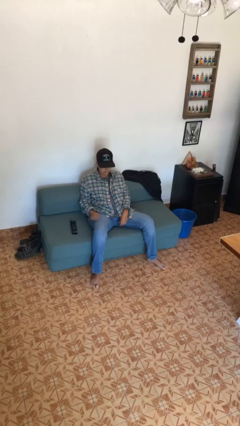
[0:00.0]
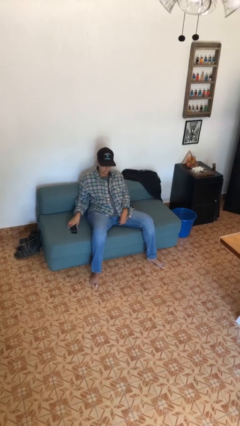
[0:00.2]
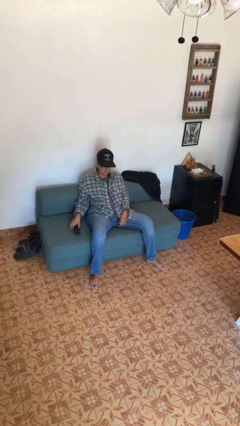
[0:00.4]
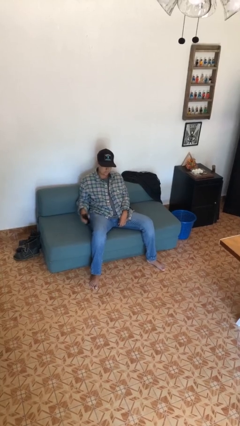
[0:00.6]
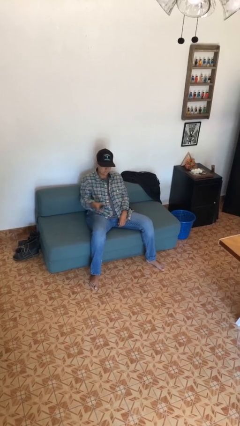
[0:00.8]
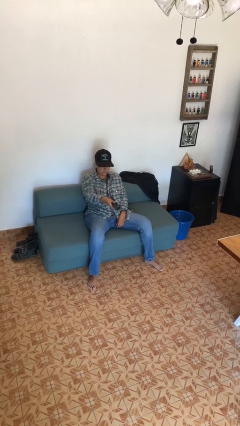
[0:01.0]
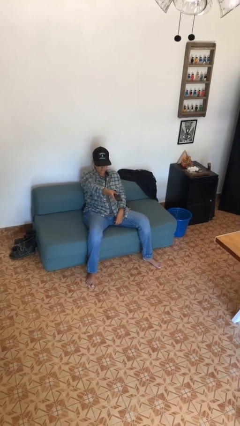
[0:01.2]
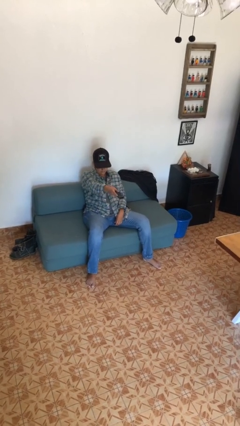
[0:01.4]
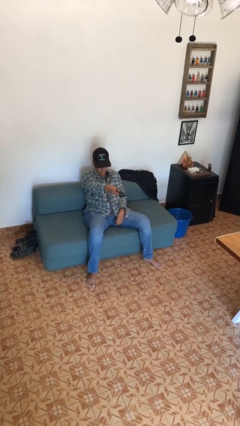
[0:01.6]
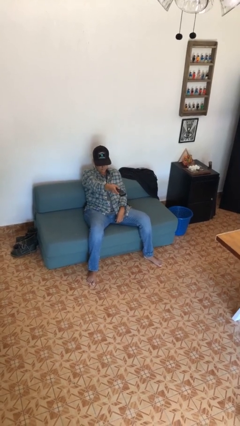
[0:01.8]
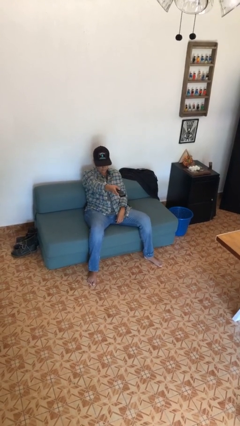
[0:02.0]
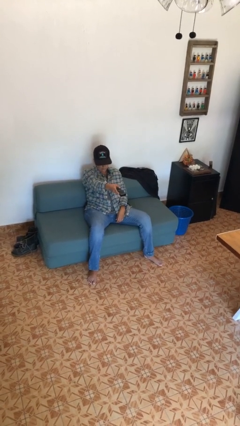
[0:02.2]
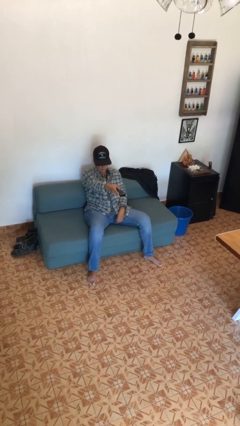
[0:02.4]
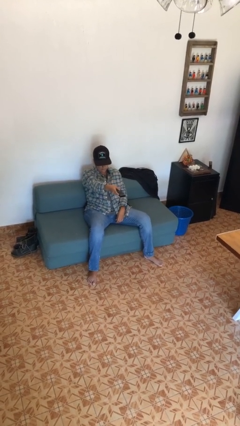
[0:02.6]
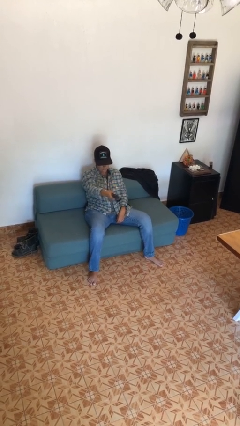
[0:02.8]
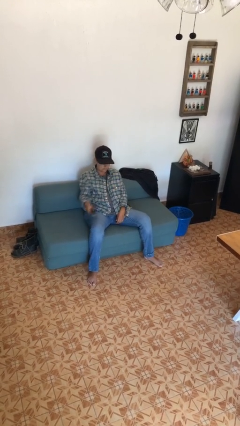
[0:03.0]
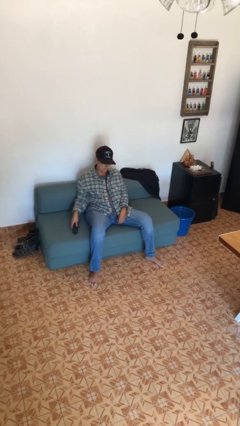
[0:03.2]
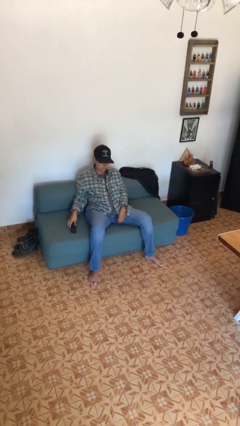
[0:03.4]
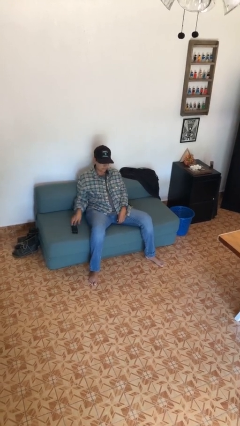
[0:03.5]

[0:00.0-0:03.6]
person uses television remote

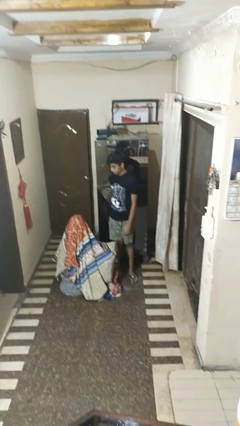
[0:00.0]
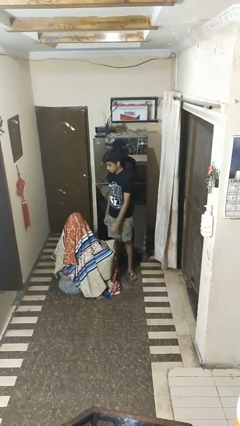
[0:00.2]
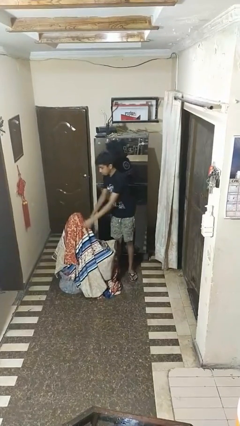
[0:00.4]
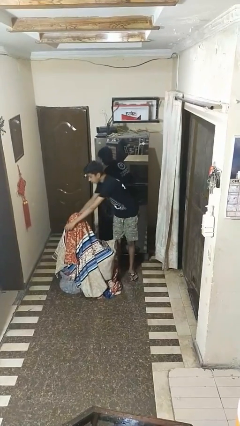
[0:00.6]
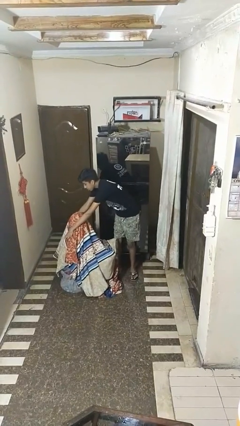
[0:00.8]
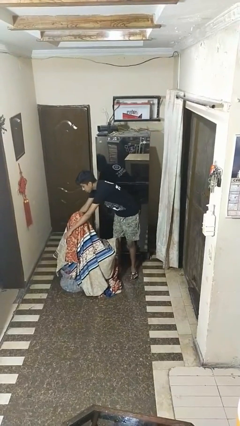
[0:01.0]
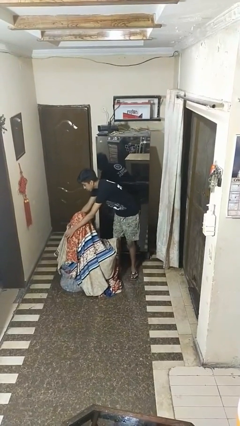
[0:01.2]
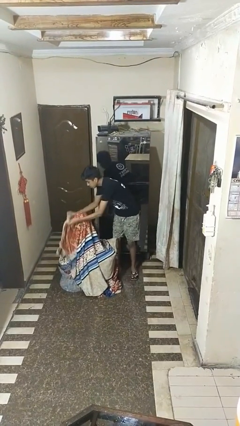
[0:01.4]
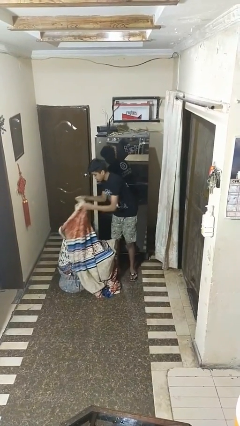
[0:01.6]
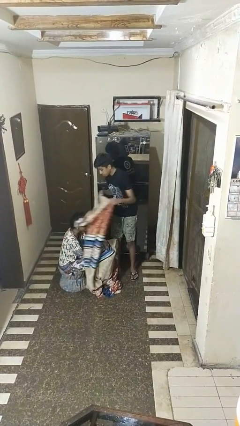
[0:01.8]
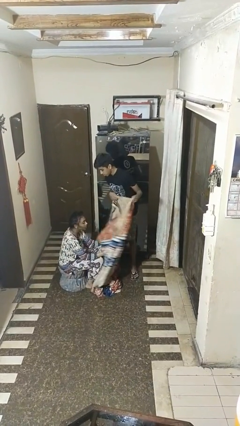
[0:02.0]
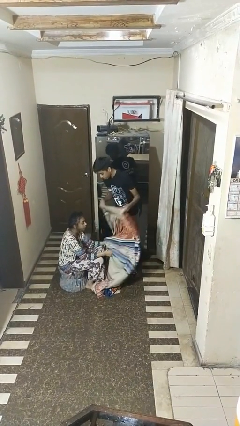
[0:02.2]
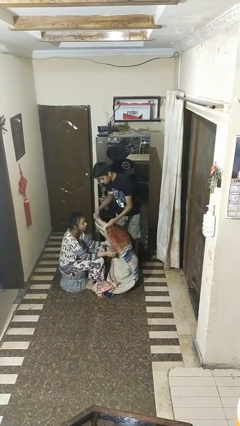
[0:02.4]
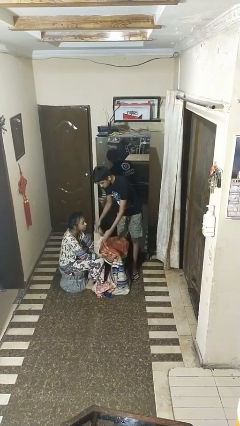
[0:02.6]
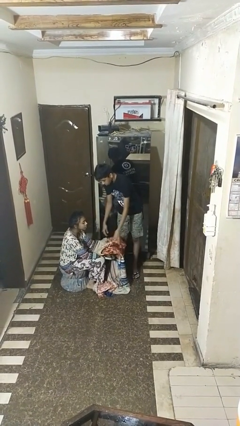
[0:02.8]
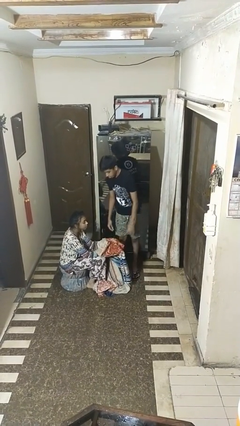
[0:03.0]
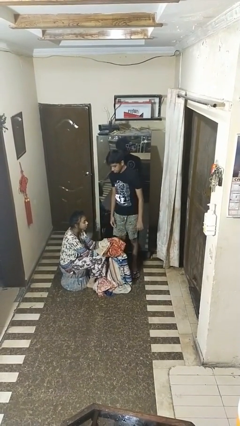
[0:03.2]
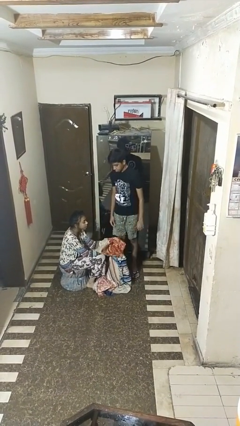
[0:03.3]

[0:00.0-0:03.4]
person uncovers friend with blanket

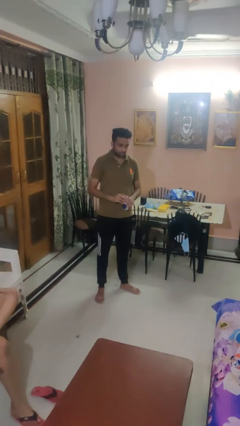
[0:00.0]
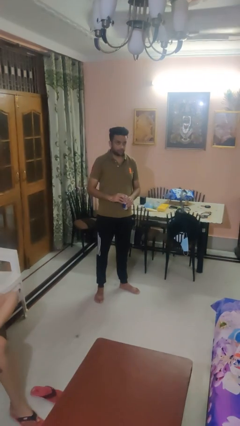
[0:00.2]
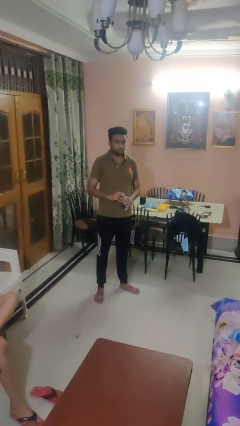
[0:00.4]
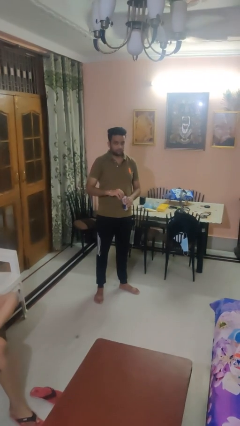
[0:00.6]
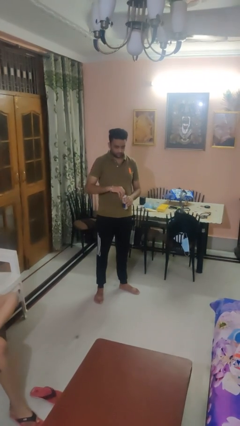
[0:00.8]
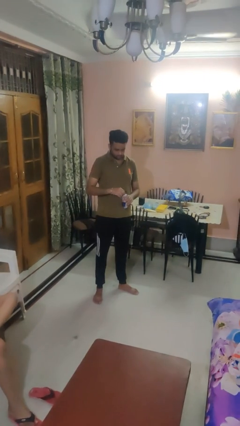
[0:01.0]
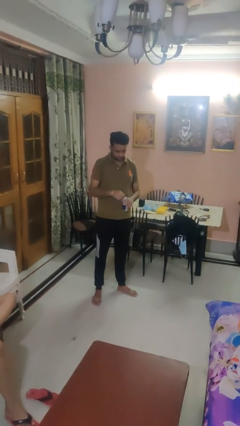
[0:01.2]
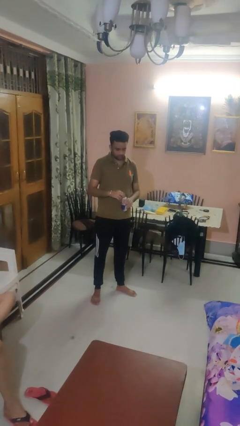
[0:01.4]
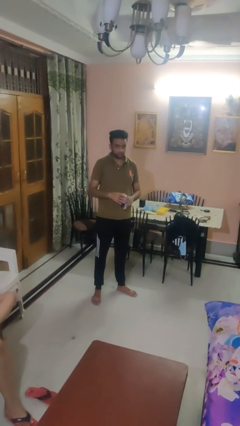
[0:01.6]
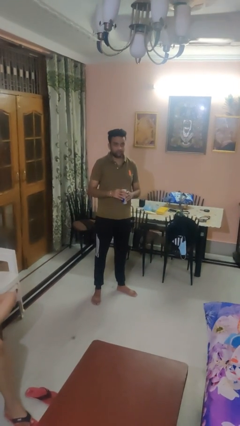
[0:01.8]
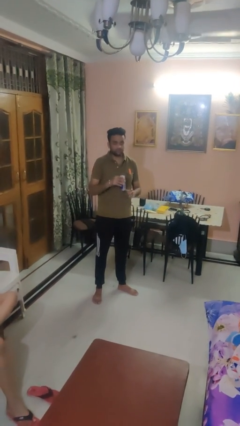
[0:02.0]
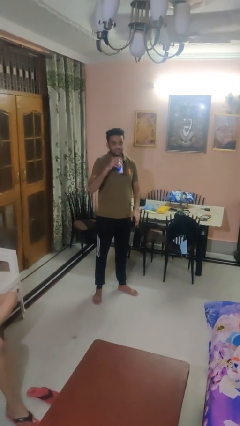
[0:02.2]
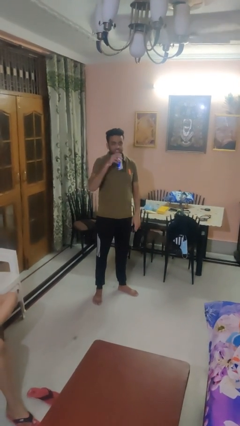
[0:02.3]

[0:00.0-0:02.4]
person opens beverage can

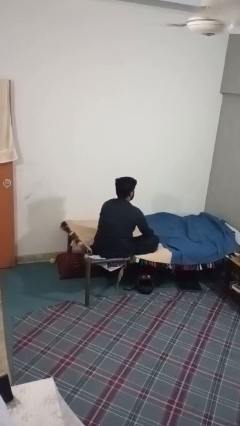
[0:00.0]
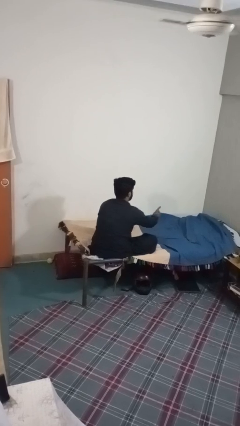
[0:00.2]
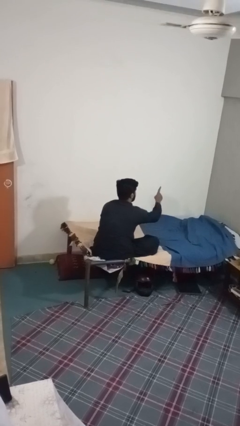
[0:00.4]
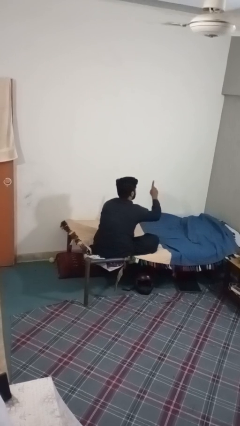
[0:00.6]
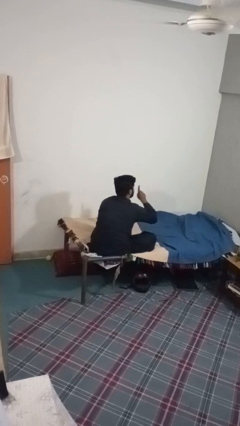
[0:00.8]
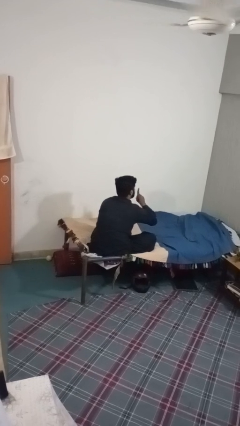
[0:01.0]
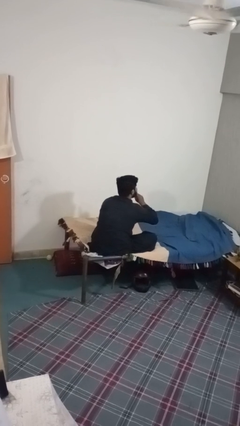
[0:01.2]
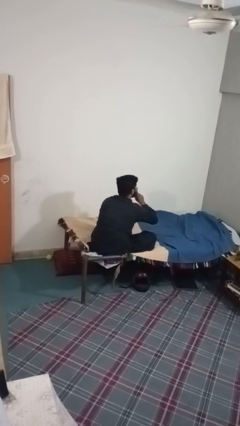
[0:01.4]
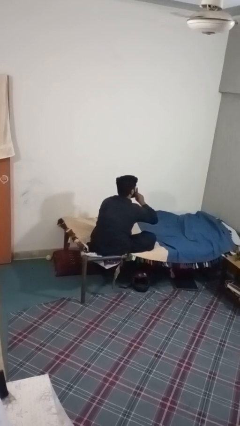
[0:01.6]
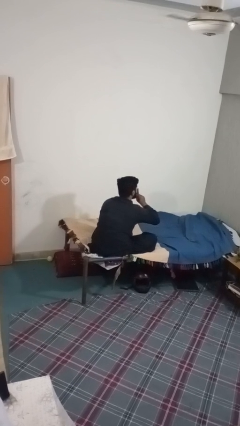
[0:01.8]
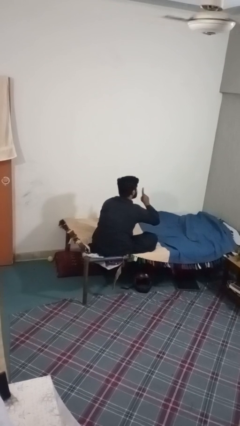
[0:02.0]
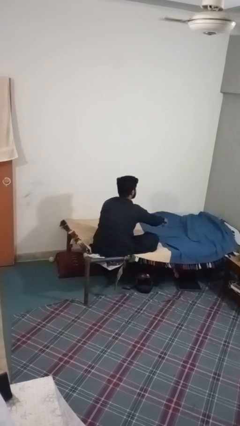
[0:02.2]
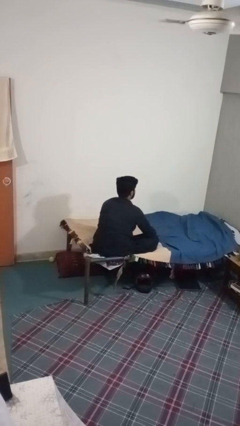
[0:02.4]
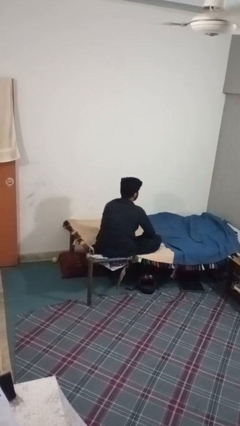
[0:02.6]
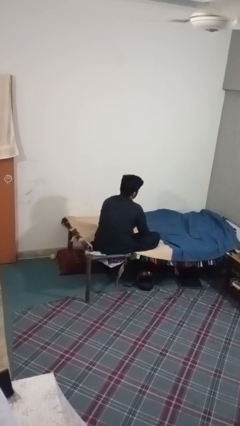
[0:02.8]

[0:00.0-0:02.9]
person gestures be quiet

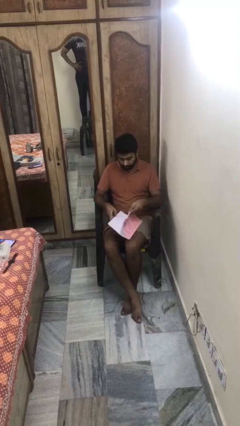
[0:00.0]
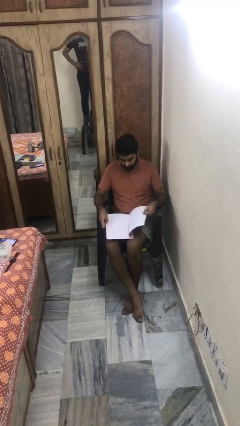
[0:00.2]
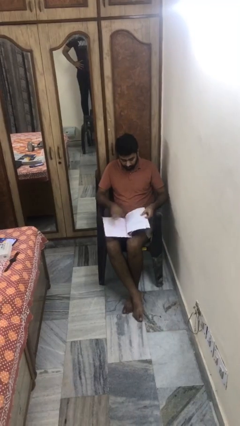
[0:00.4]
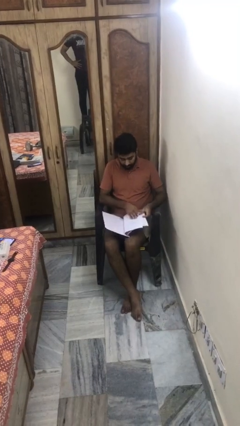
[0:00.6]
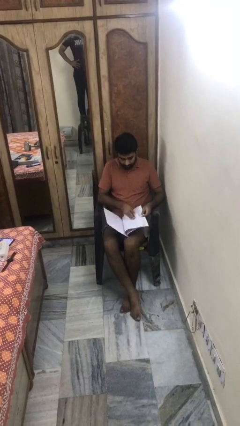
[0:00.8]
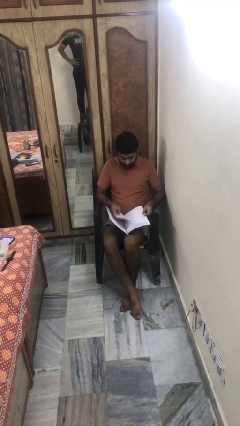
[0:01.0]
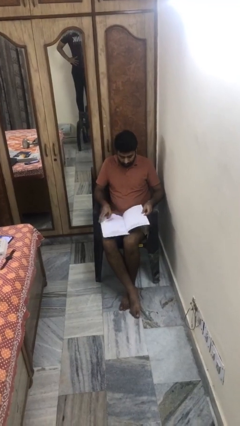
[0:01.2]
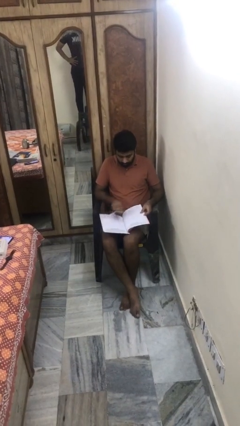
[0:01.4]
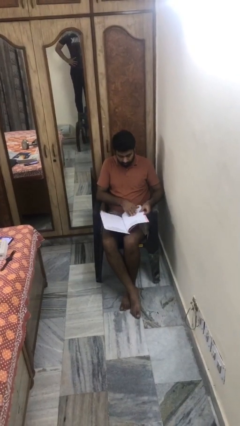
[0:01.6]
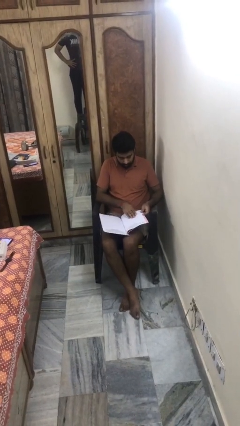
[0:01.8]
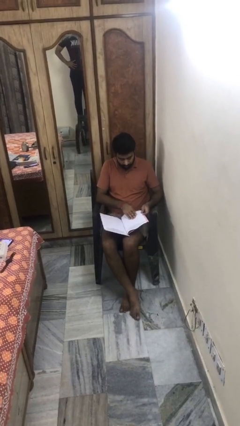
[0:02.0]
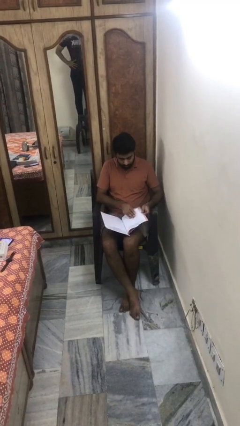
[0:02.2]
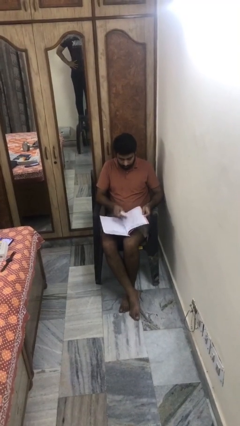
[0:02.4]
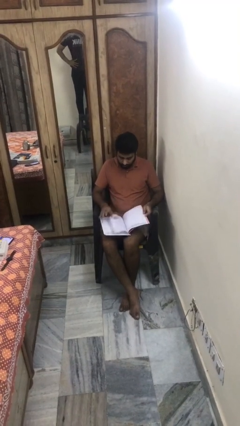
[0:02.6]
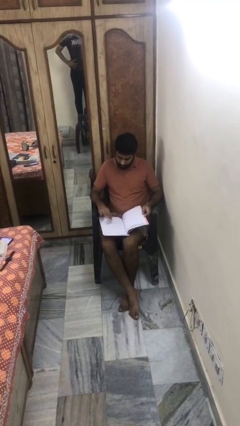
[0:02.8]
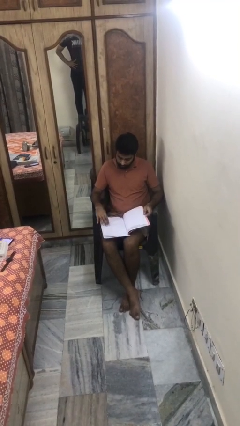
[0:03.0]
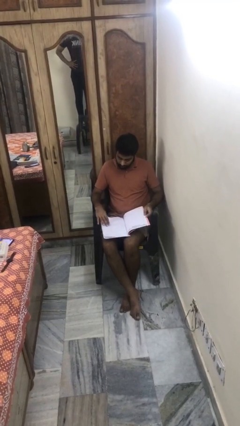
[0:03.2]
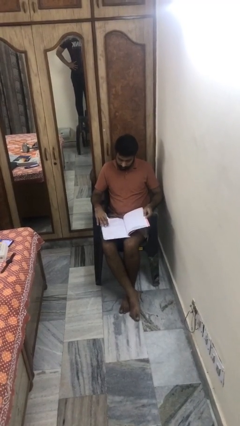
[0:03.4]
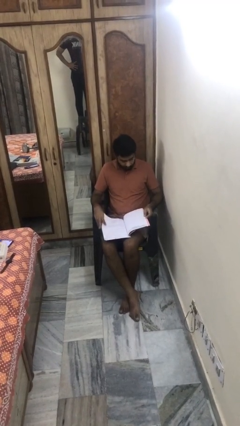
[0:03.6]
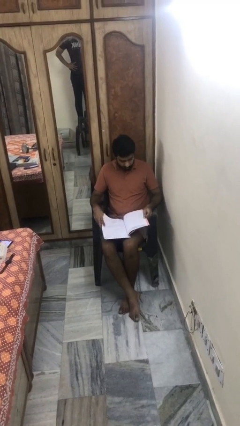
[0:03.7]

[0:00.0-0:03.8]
person reads magazine

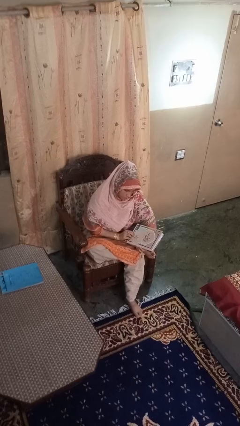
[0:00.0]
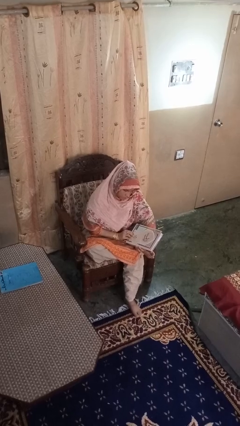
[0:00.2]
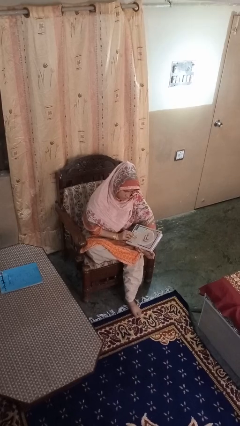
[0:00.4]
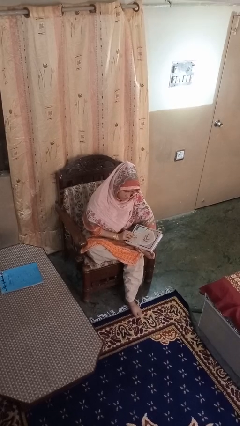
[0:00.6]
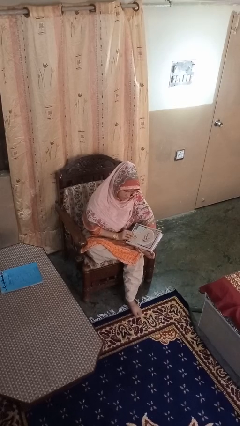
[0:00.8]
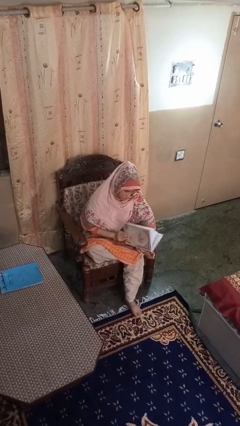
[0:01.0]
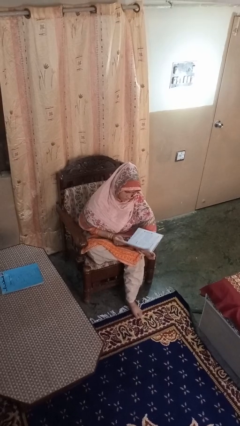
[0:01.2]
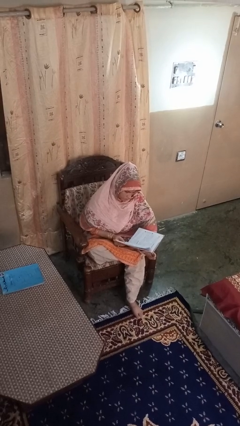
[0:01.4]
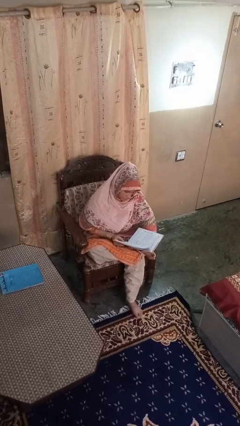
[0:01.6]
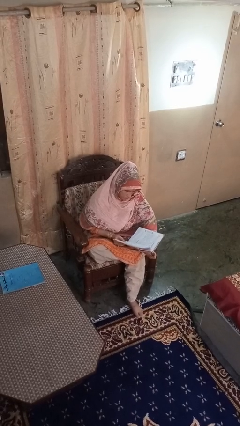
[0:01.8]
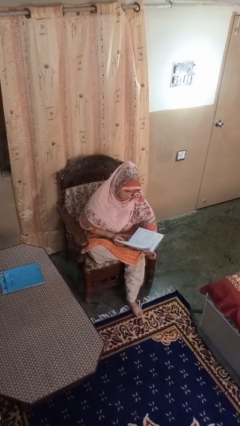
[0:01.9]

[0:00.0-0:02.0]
person reads book
